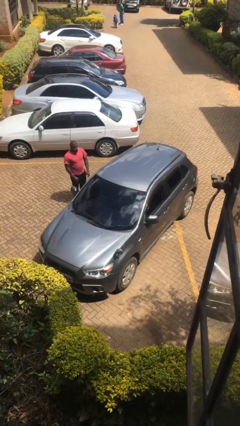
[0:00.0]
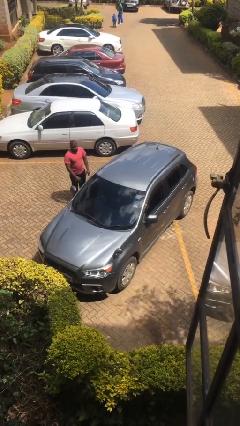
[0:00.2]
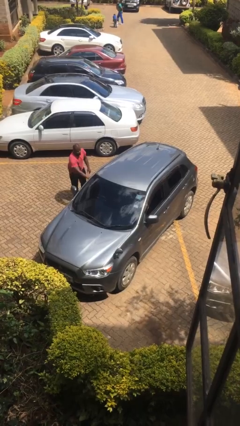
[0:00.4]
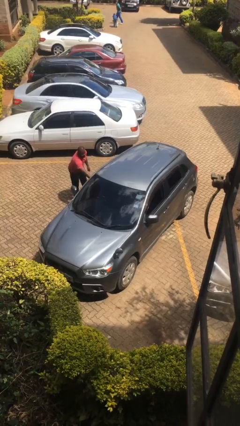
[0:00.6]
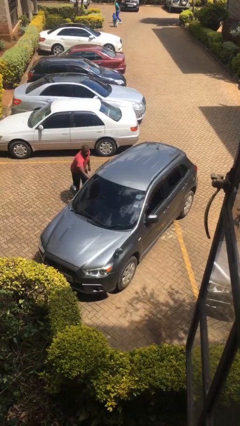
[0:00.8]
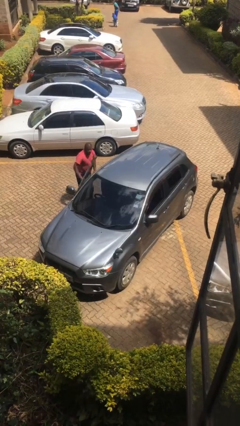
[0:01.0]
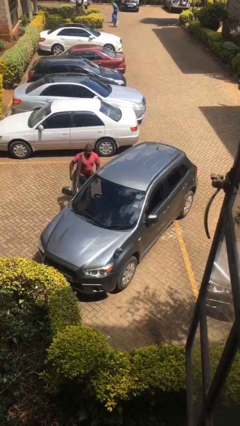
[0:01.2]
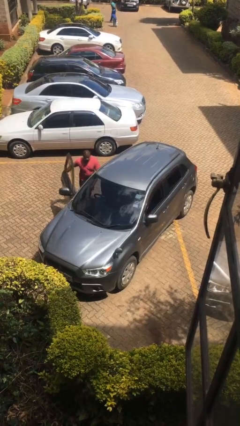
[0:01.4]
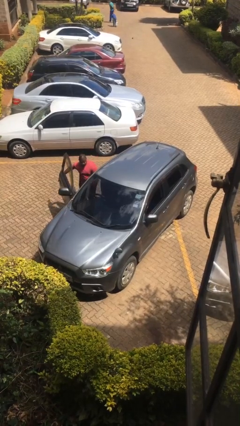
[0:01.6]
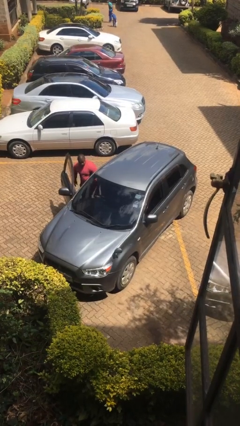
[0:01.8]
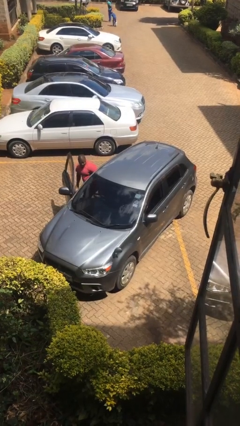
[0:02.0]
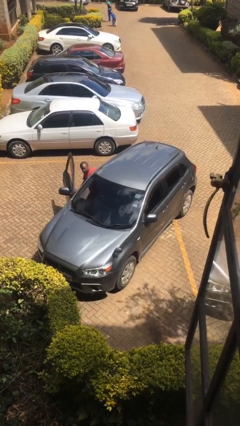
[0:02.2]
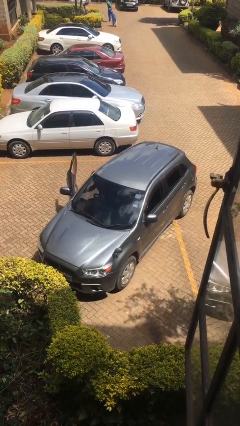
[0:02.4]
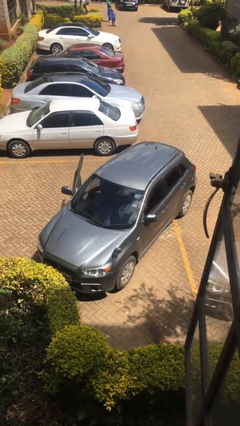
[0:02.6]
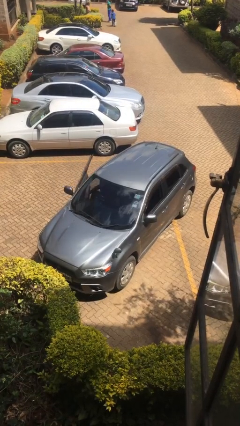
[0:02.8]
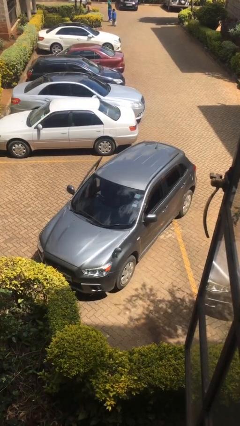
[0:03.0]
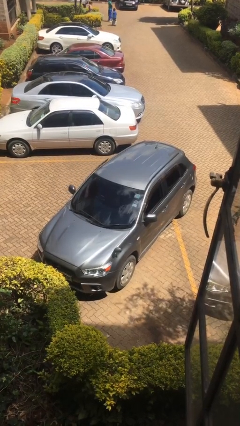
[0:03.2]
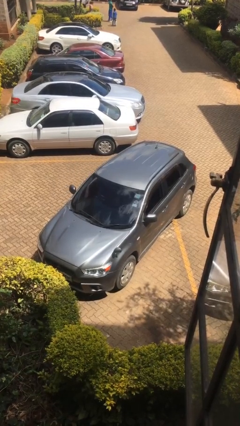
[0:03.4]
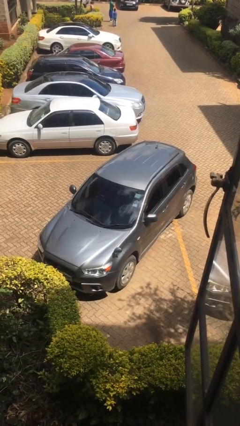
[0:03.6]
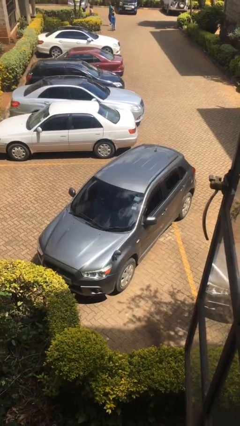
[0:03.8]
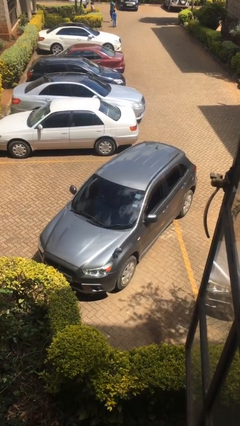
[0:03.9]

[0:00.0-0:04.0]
car picks up person

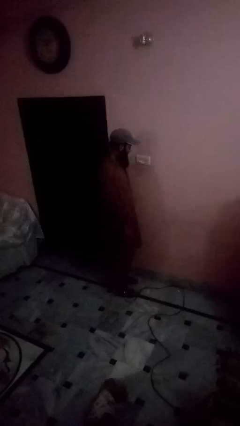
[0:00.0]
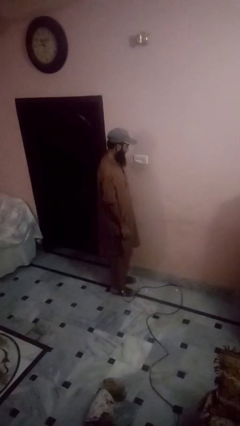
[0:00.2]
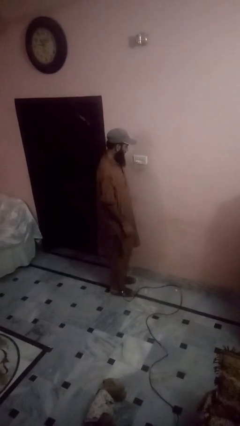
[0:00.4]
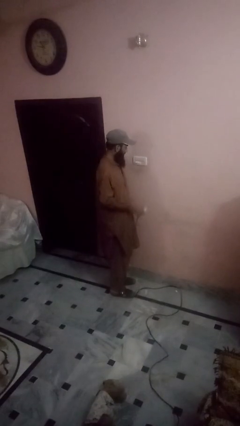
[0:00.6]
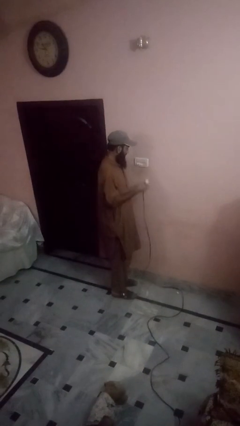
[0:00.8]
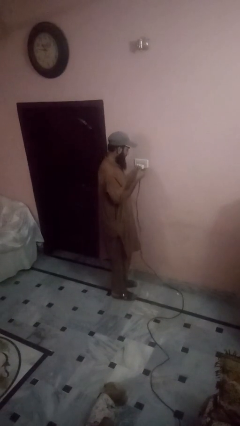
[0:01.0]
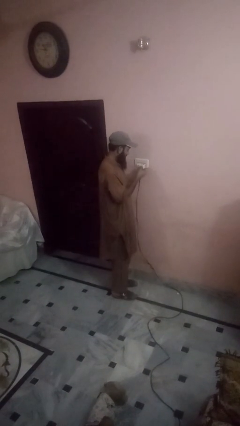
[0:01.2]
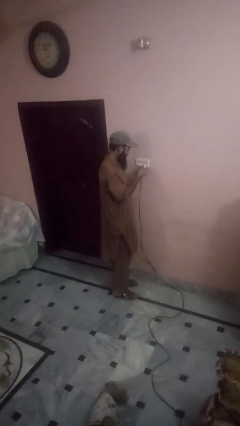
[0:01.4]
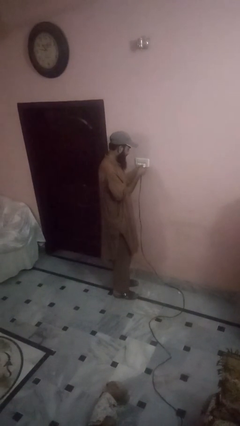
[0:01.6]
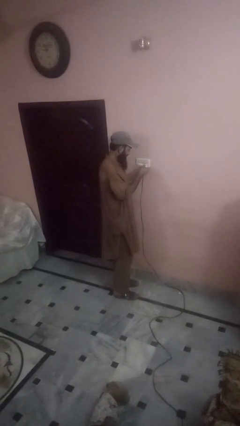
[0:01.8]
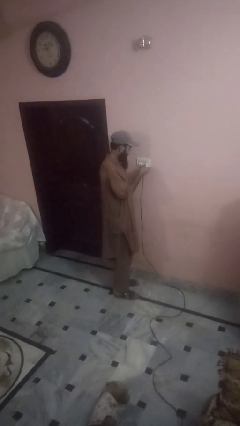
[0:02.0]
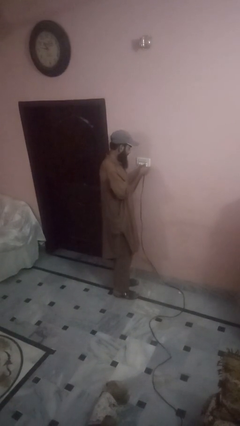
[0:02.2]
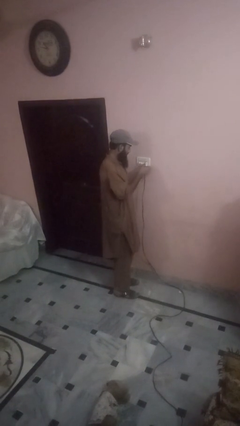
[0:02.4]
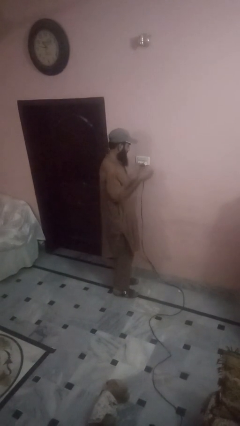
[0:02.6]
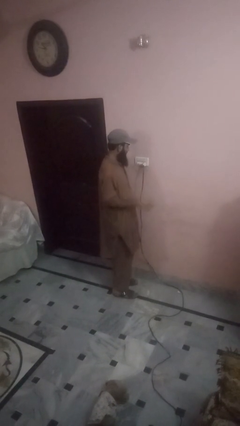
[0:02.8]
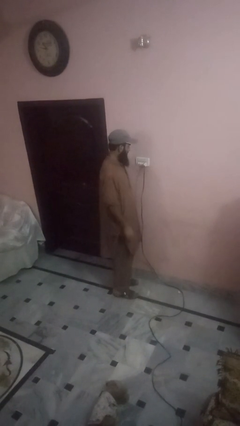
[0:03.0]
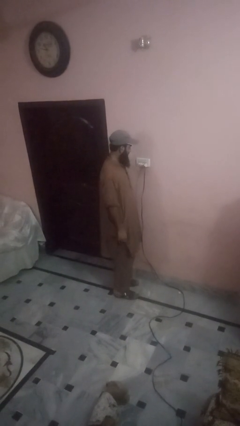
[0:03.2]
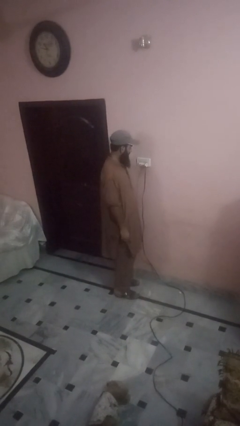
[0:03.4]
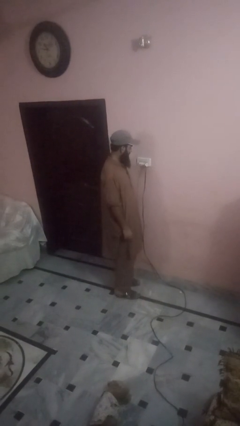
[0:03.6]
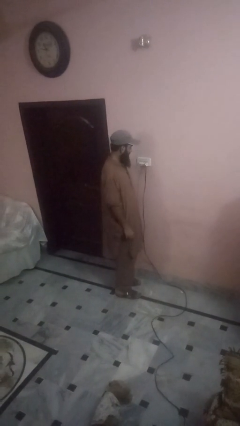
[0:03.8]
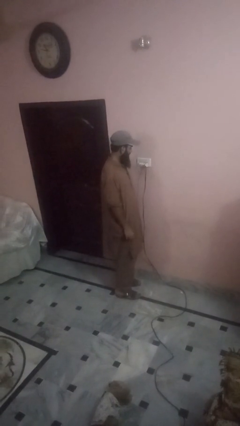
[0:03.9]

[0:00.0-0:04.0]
person plugs into electrical socket

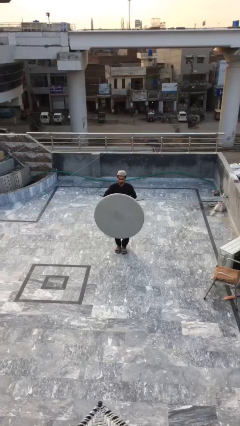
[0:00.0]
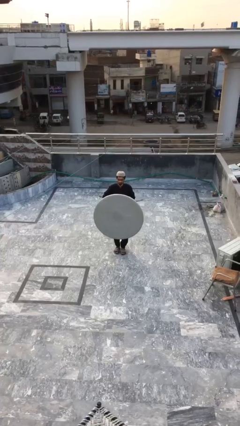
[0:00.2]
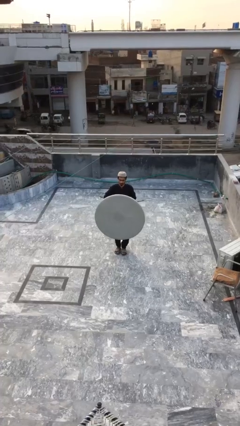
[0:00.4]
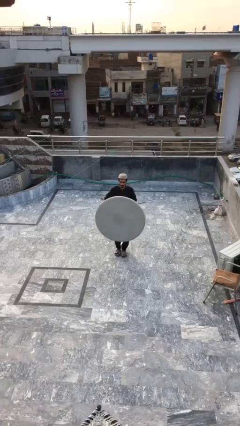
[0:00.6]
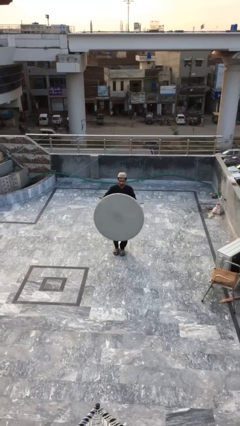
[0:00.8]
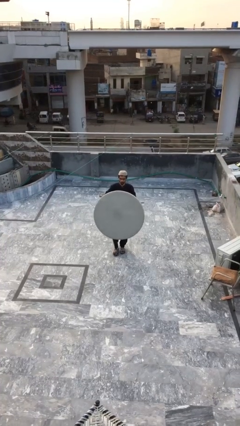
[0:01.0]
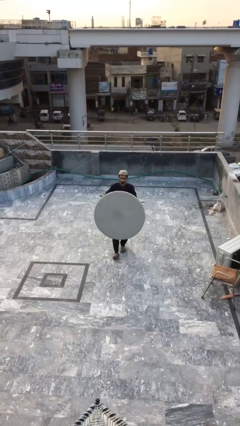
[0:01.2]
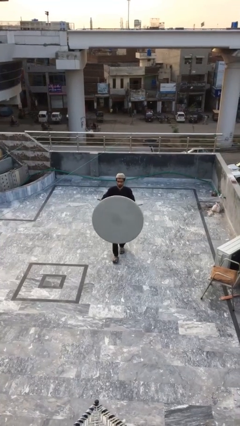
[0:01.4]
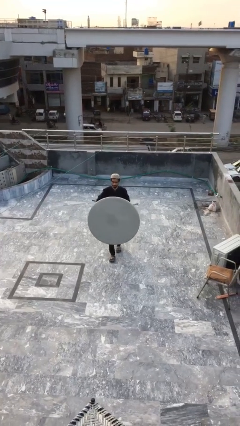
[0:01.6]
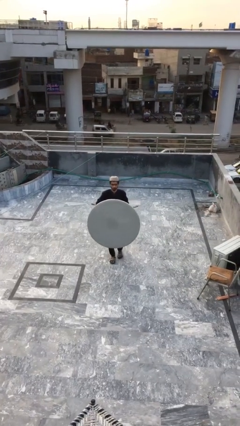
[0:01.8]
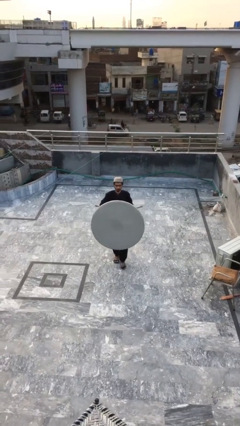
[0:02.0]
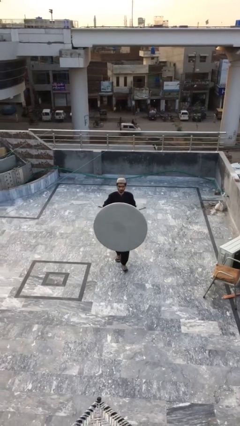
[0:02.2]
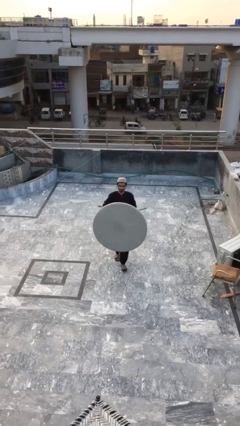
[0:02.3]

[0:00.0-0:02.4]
person carries heavy object

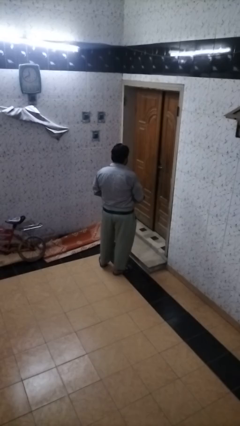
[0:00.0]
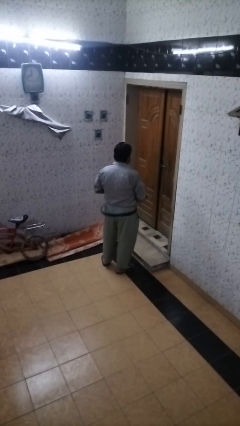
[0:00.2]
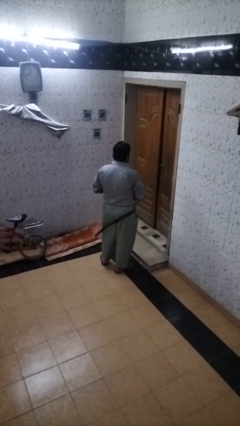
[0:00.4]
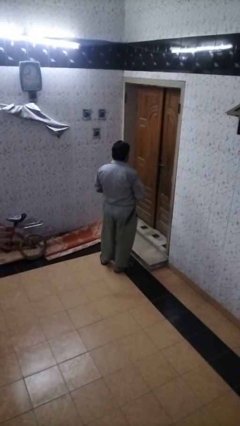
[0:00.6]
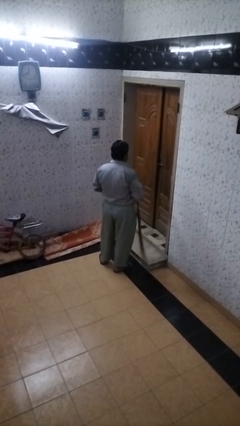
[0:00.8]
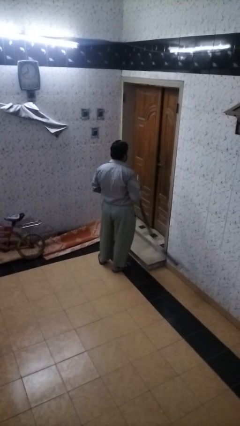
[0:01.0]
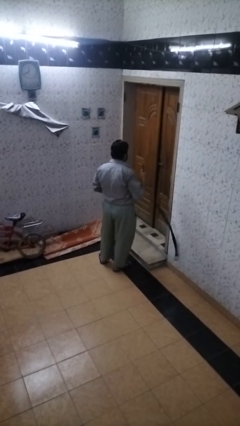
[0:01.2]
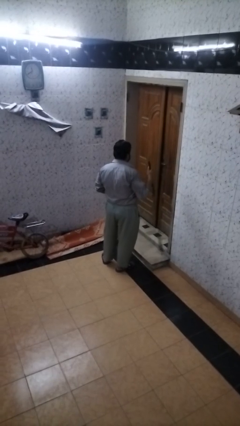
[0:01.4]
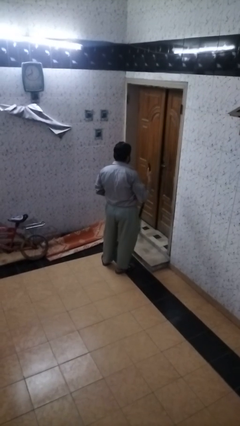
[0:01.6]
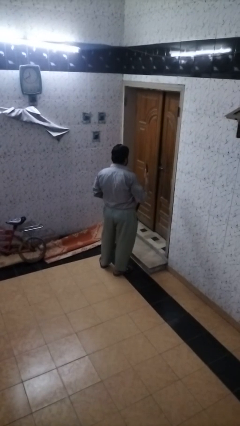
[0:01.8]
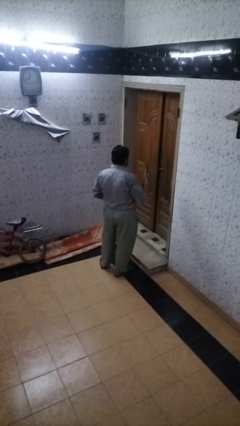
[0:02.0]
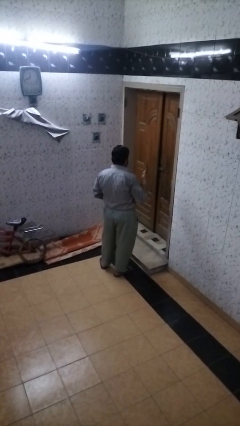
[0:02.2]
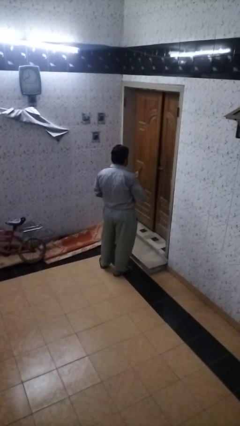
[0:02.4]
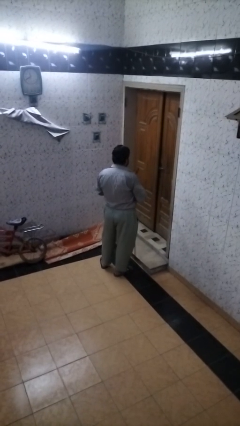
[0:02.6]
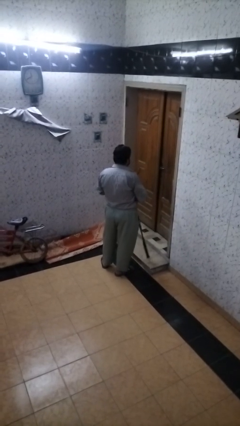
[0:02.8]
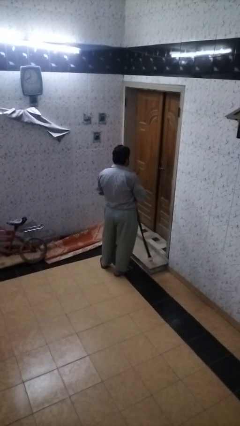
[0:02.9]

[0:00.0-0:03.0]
person takes off belt

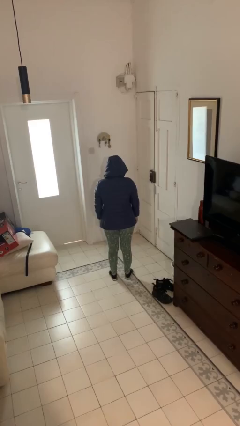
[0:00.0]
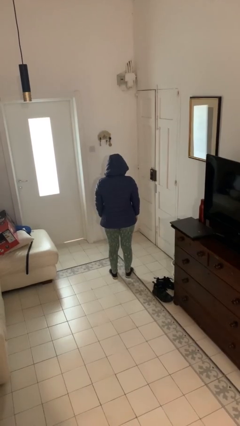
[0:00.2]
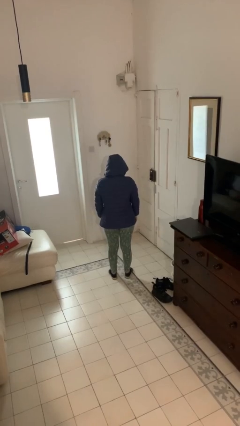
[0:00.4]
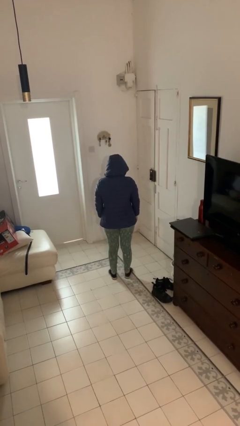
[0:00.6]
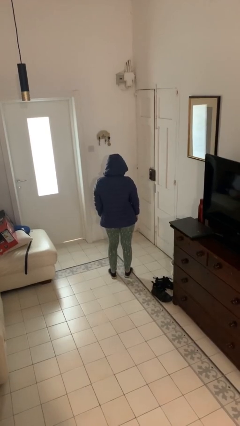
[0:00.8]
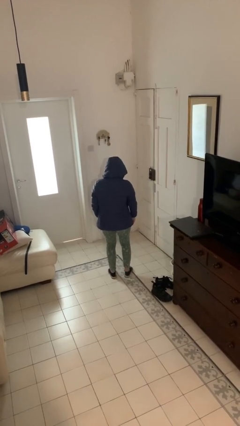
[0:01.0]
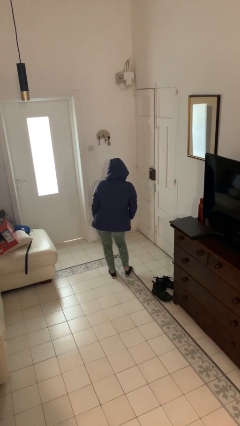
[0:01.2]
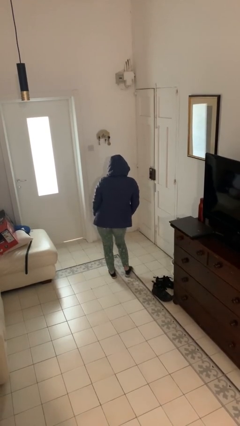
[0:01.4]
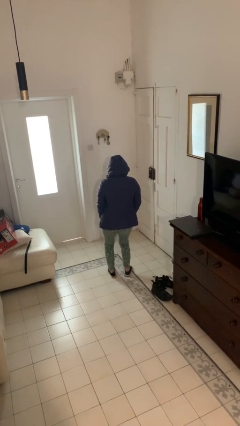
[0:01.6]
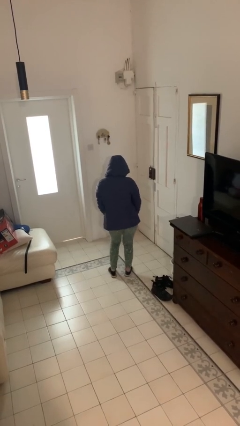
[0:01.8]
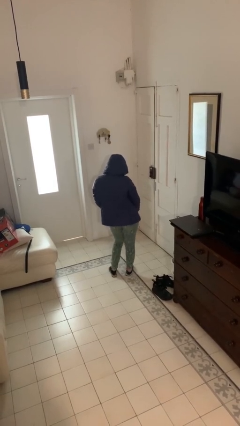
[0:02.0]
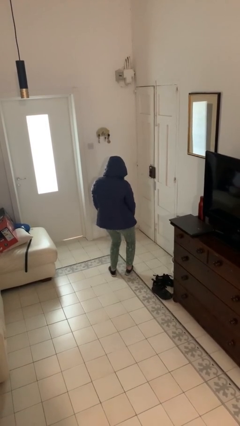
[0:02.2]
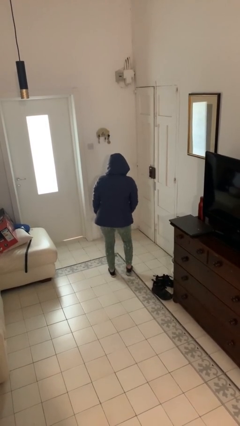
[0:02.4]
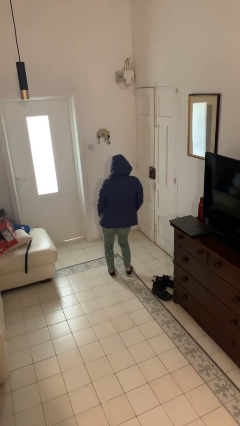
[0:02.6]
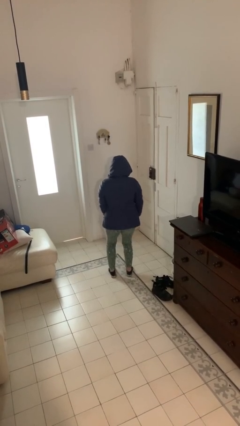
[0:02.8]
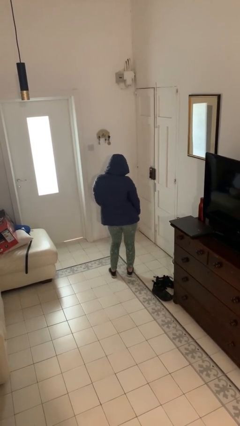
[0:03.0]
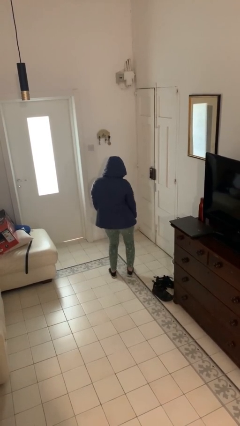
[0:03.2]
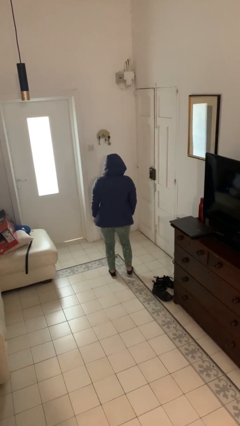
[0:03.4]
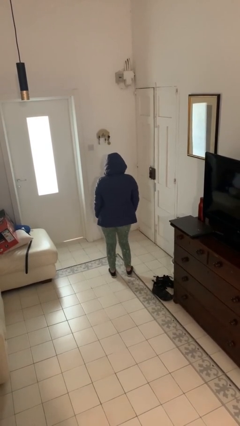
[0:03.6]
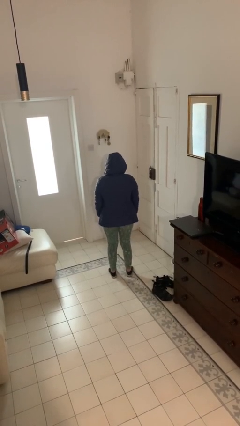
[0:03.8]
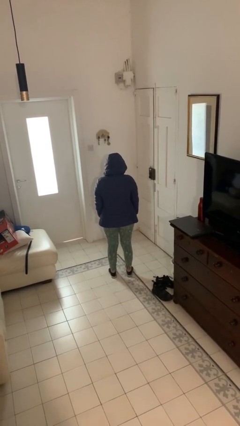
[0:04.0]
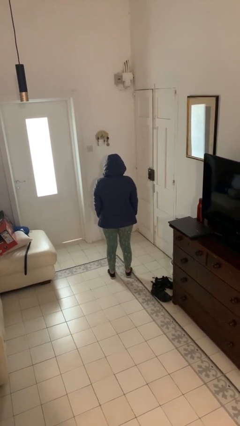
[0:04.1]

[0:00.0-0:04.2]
person dances in place
